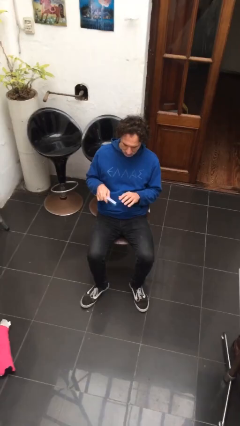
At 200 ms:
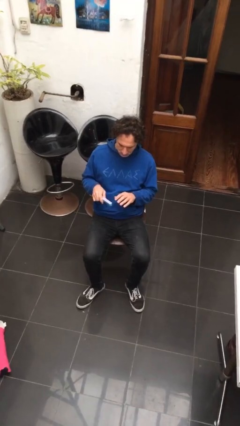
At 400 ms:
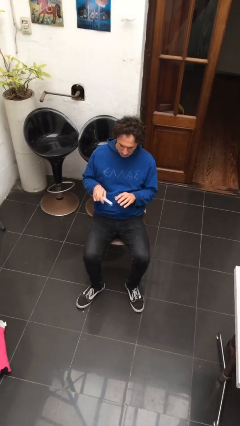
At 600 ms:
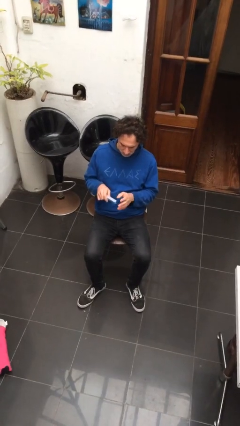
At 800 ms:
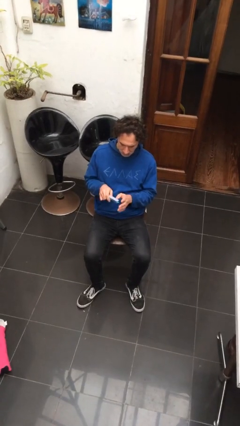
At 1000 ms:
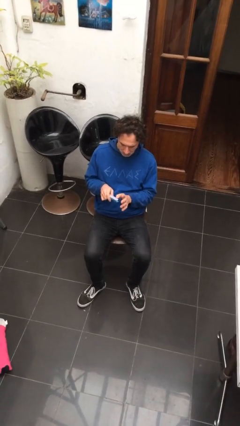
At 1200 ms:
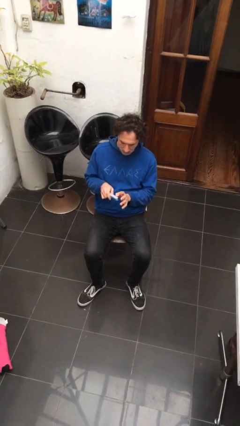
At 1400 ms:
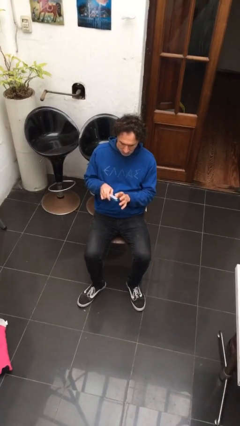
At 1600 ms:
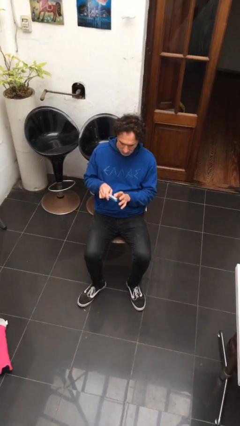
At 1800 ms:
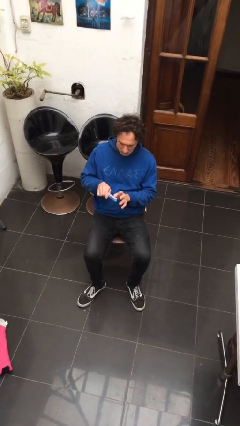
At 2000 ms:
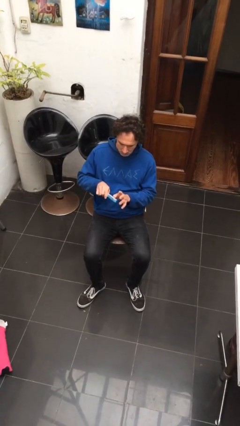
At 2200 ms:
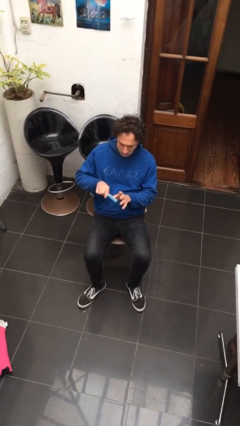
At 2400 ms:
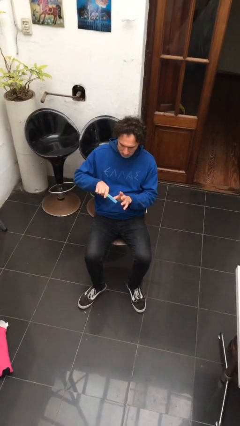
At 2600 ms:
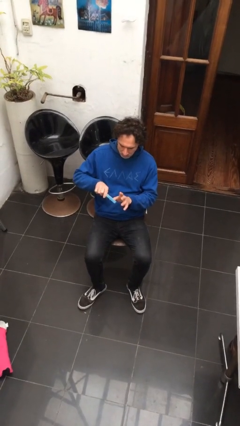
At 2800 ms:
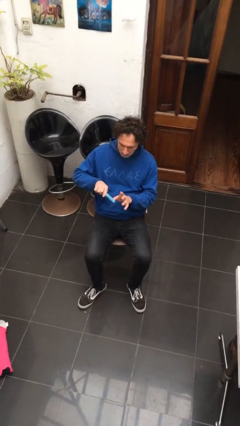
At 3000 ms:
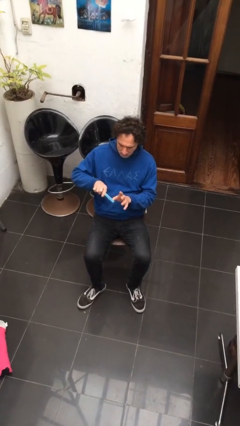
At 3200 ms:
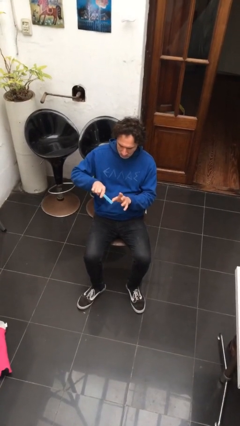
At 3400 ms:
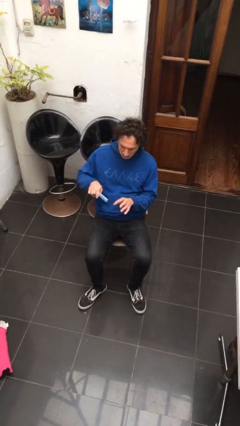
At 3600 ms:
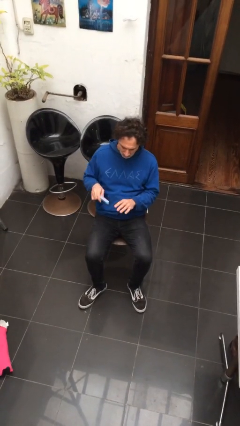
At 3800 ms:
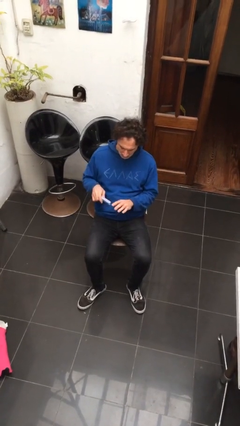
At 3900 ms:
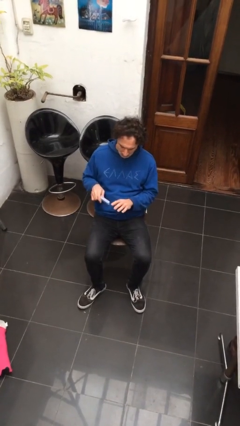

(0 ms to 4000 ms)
person files fingernails

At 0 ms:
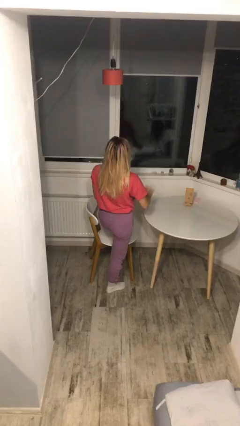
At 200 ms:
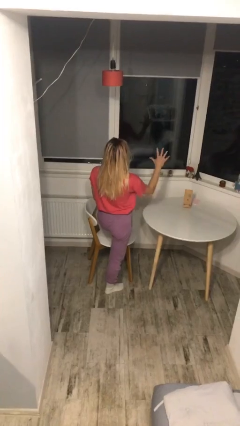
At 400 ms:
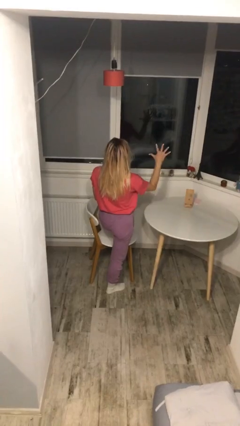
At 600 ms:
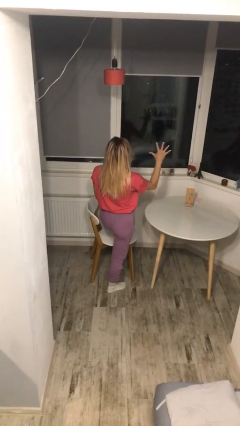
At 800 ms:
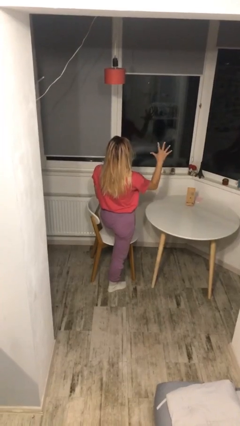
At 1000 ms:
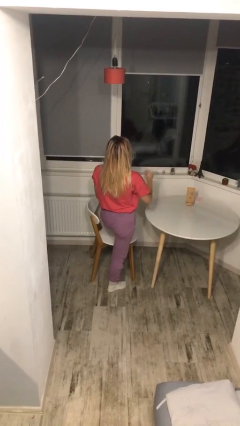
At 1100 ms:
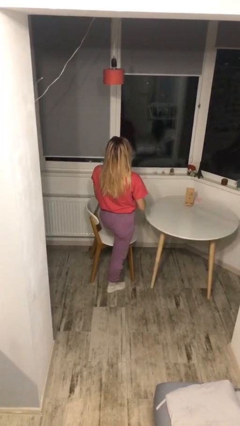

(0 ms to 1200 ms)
person gestures number five

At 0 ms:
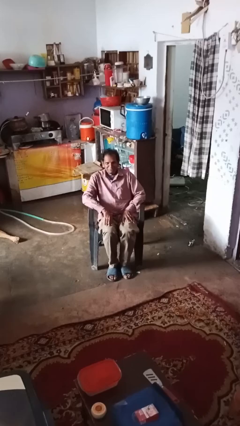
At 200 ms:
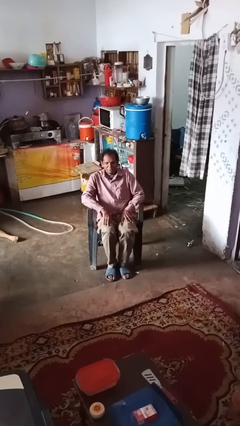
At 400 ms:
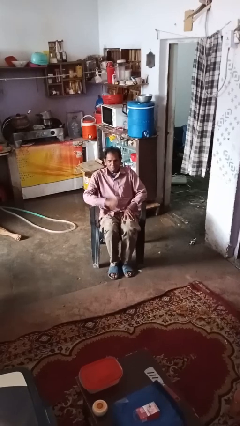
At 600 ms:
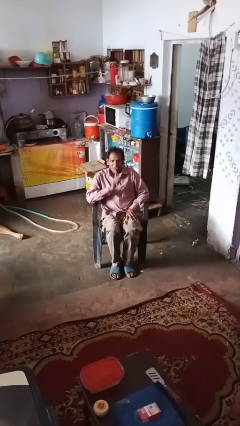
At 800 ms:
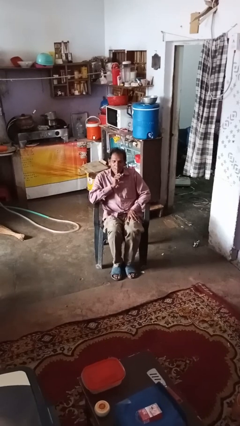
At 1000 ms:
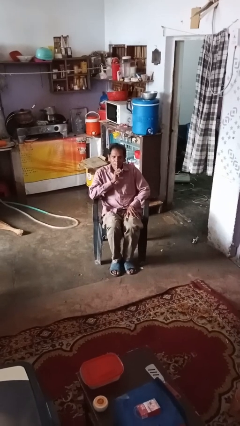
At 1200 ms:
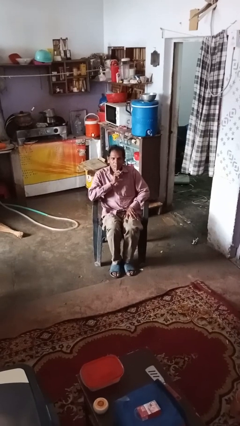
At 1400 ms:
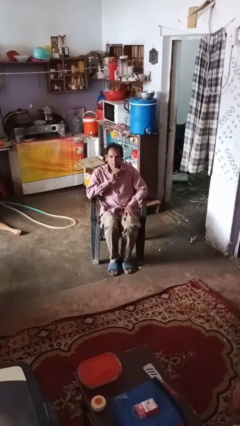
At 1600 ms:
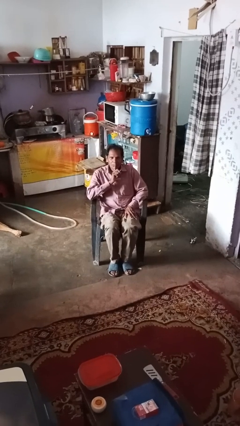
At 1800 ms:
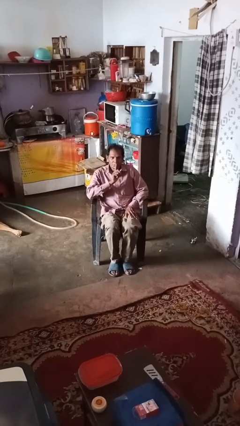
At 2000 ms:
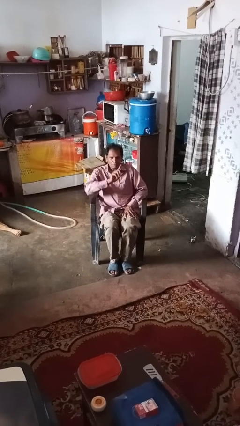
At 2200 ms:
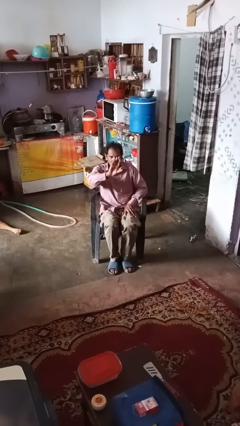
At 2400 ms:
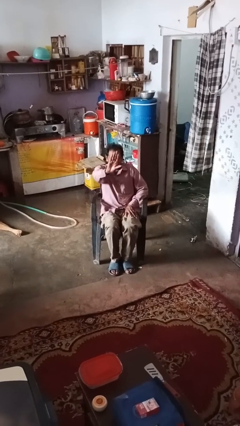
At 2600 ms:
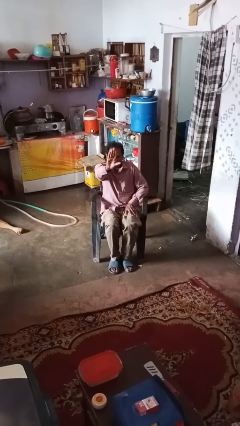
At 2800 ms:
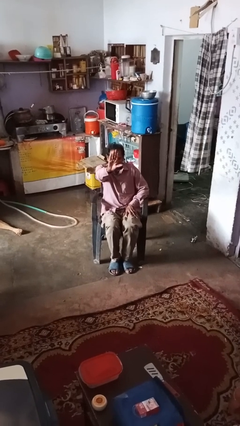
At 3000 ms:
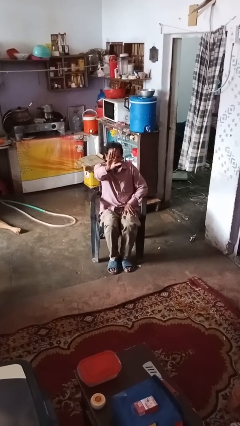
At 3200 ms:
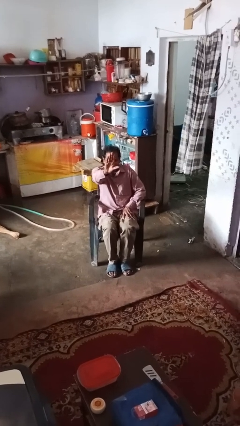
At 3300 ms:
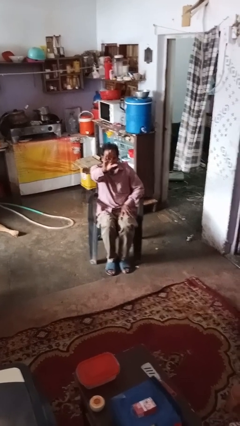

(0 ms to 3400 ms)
person gestures be quiet

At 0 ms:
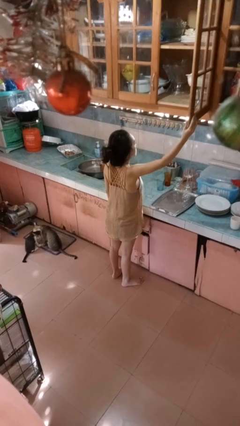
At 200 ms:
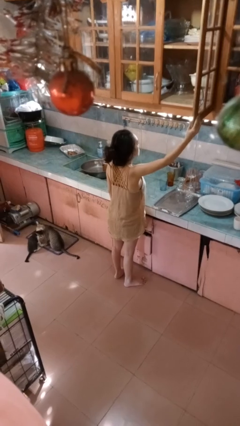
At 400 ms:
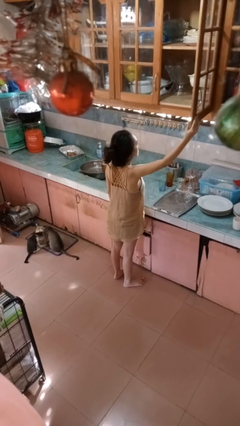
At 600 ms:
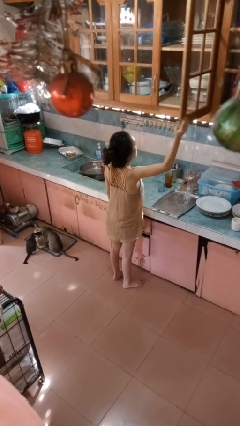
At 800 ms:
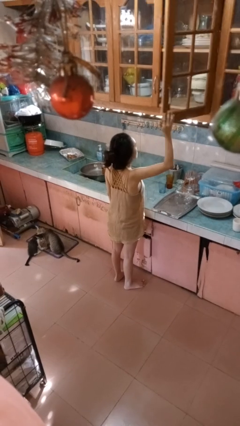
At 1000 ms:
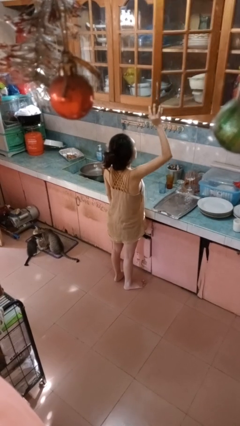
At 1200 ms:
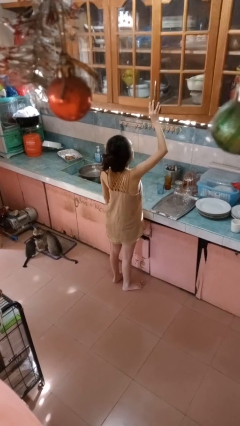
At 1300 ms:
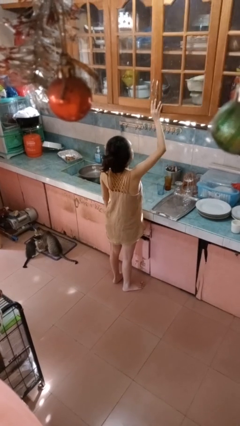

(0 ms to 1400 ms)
person closes cabinet

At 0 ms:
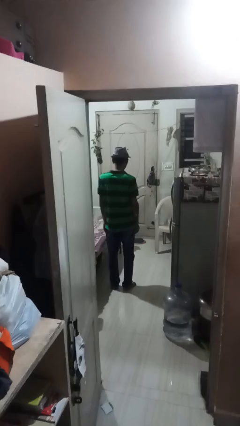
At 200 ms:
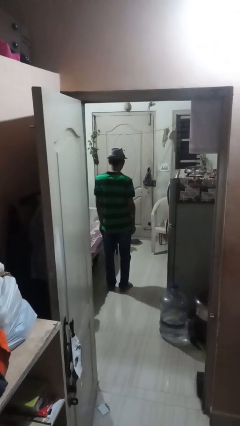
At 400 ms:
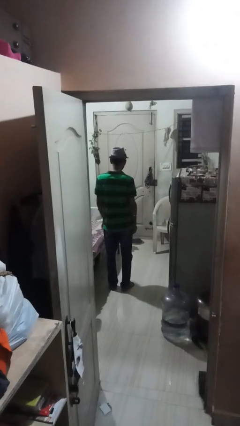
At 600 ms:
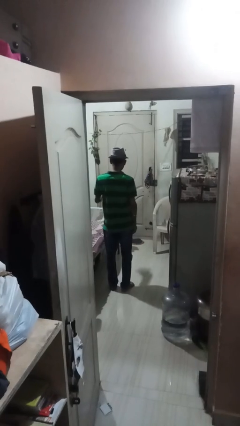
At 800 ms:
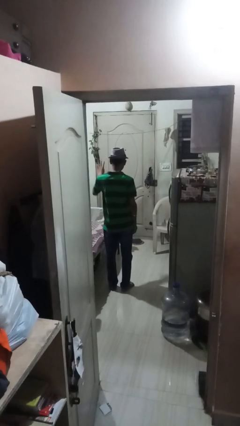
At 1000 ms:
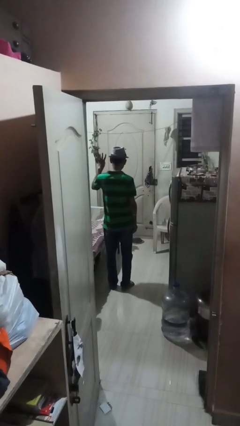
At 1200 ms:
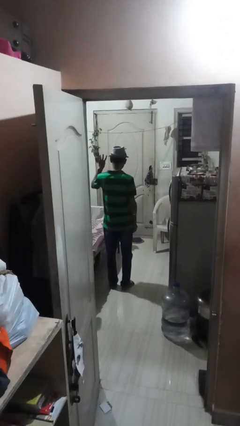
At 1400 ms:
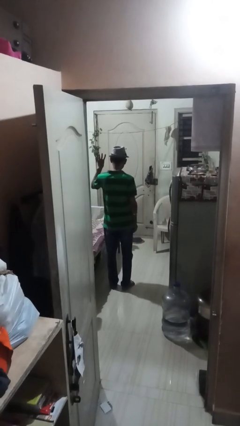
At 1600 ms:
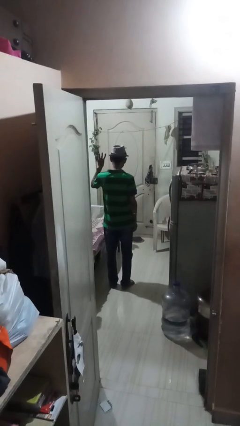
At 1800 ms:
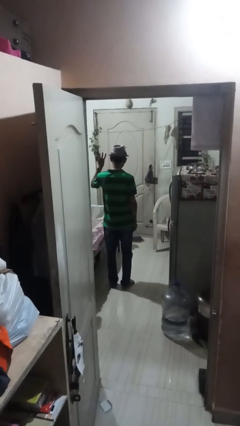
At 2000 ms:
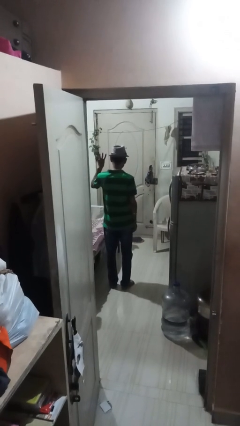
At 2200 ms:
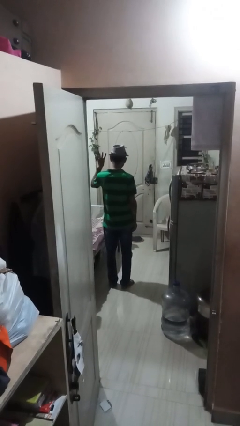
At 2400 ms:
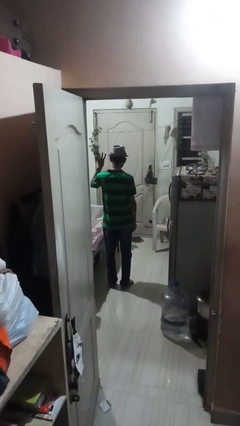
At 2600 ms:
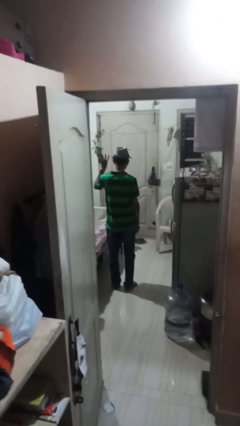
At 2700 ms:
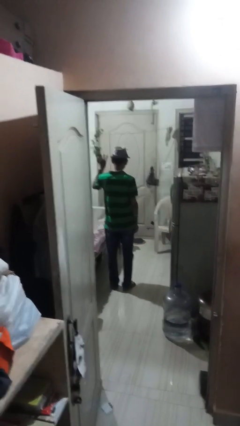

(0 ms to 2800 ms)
person gestures number four

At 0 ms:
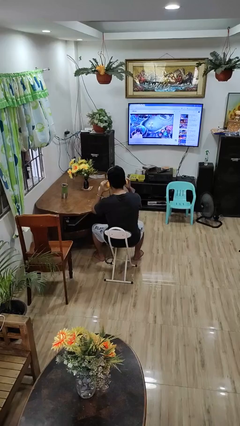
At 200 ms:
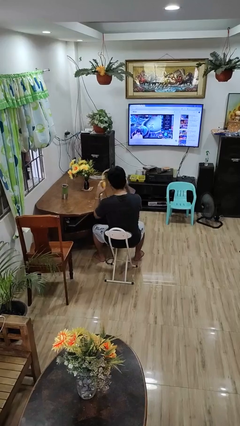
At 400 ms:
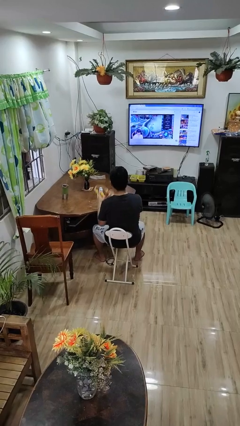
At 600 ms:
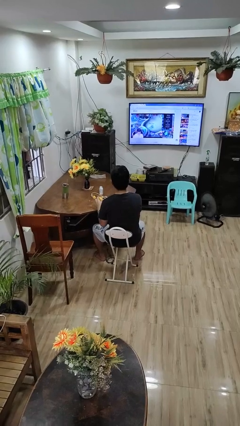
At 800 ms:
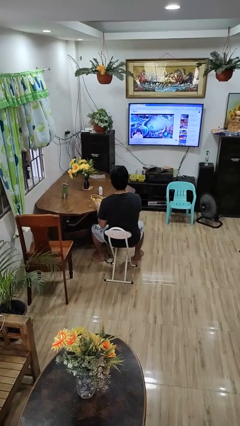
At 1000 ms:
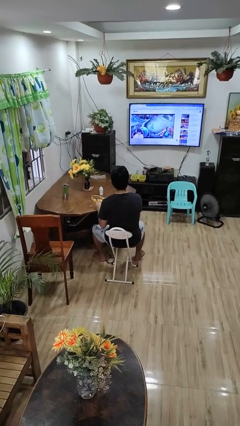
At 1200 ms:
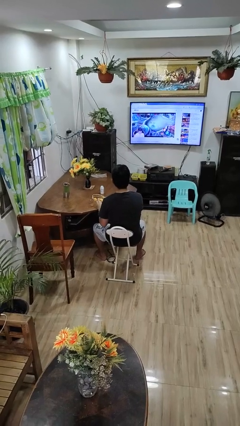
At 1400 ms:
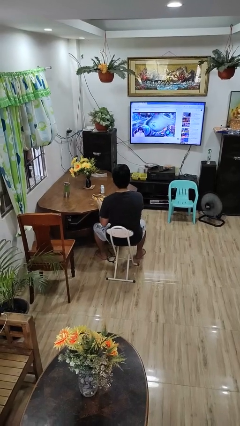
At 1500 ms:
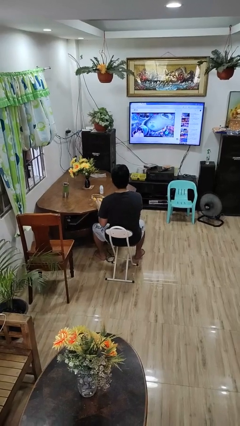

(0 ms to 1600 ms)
person takes off headphones

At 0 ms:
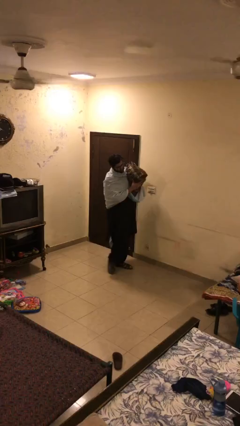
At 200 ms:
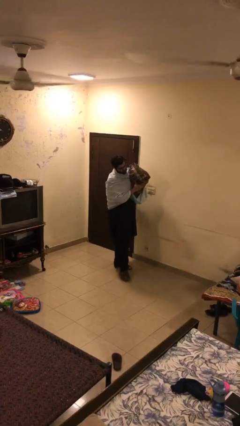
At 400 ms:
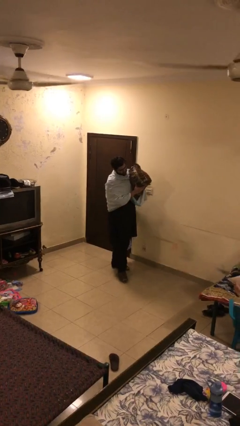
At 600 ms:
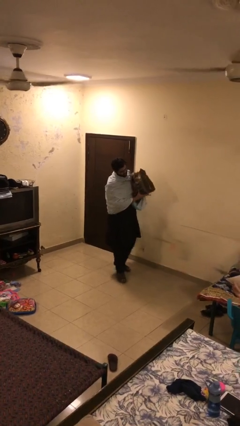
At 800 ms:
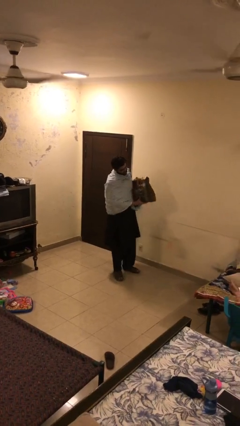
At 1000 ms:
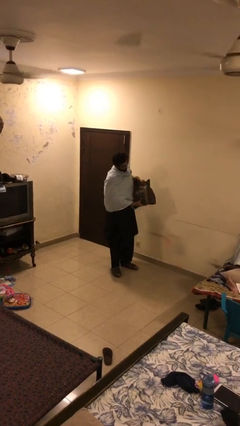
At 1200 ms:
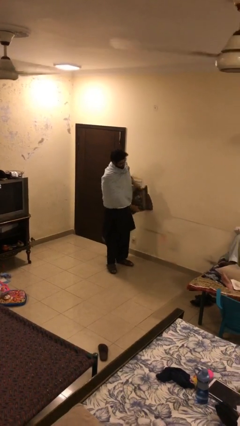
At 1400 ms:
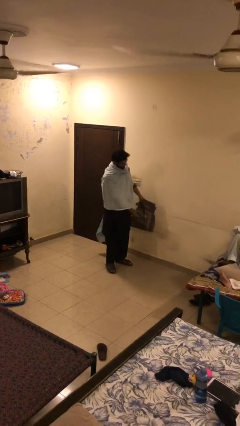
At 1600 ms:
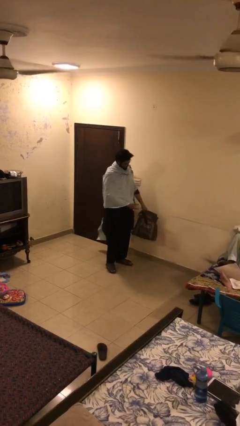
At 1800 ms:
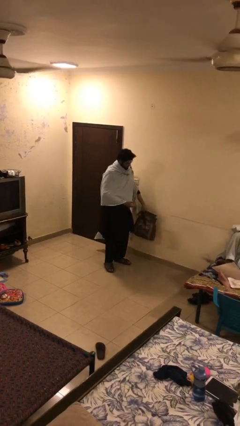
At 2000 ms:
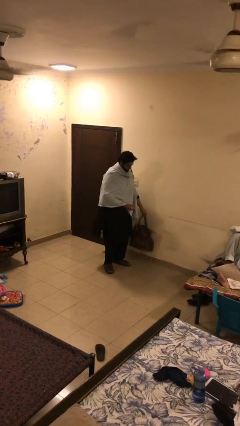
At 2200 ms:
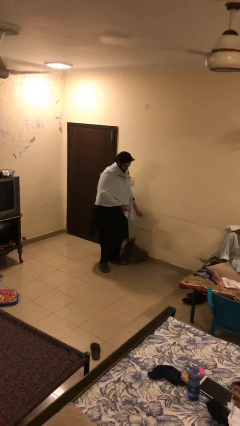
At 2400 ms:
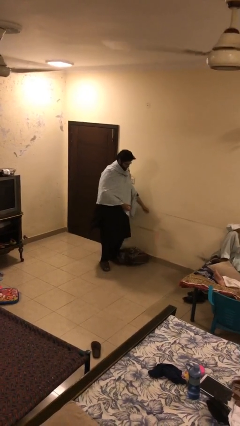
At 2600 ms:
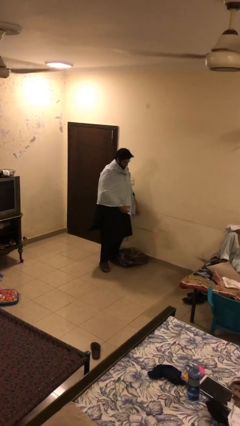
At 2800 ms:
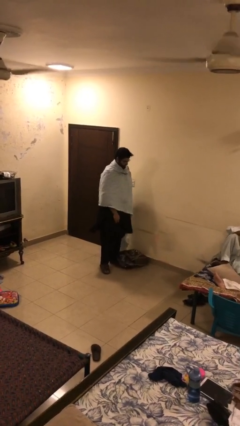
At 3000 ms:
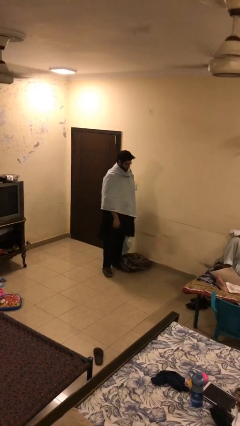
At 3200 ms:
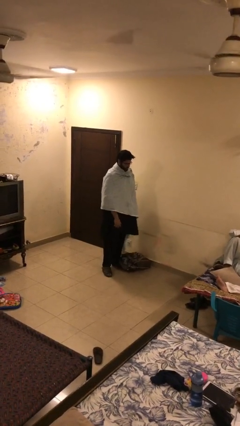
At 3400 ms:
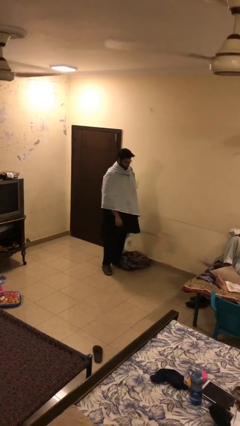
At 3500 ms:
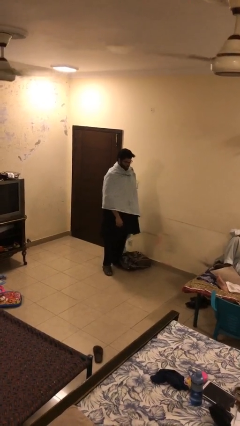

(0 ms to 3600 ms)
person puts down object on floor
